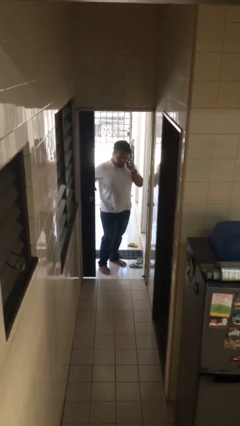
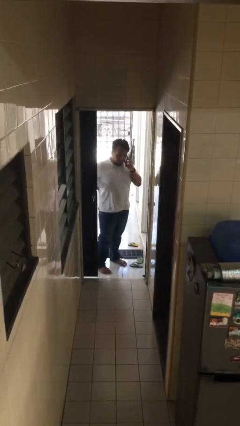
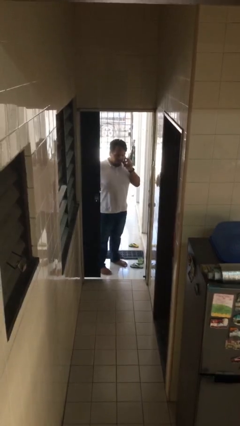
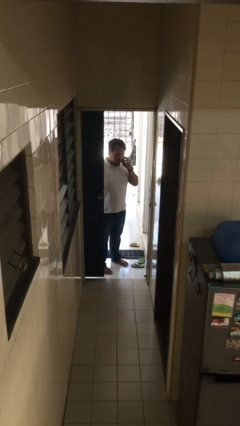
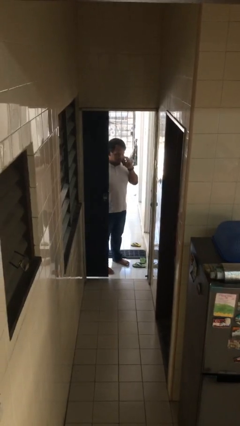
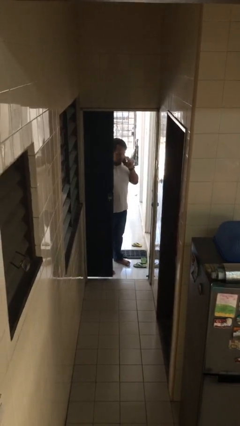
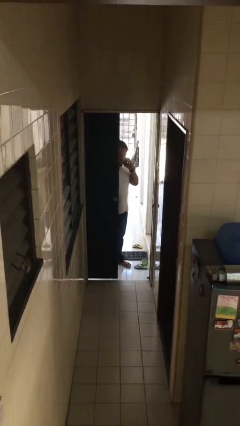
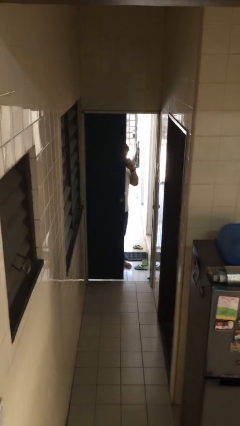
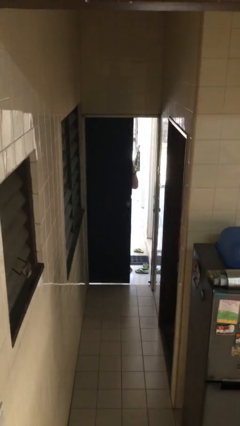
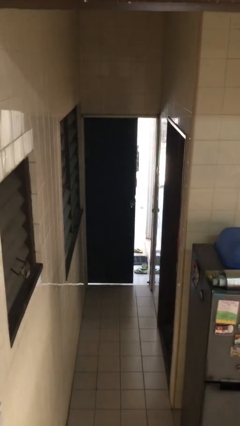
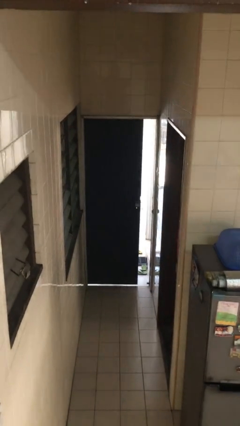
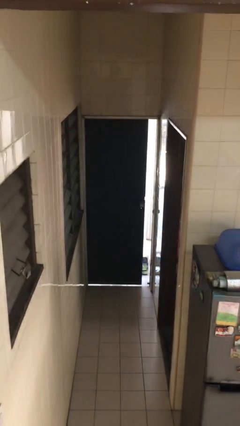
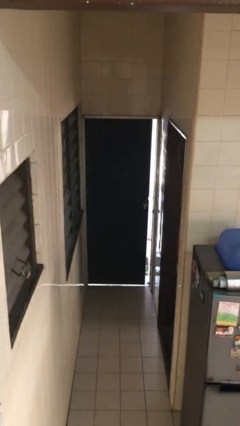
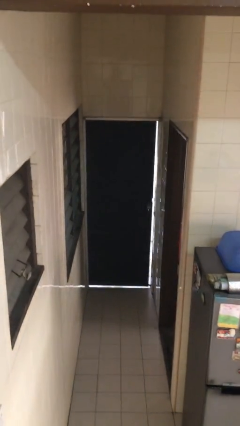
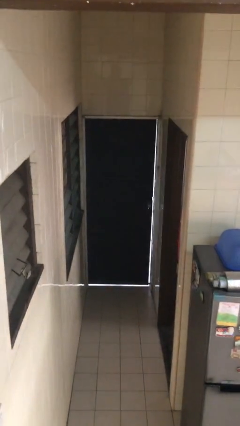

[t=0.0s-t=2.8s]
person closes facility door

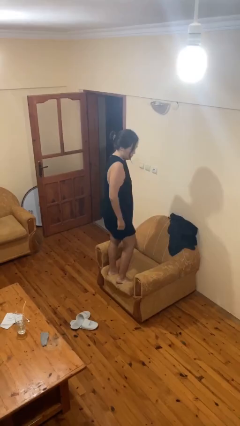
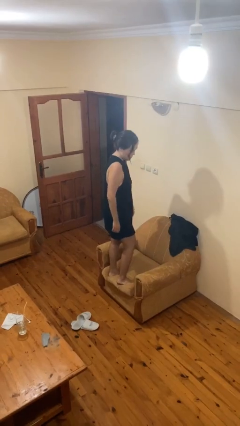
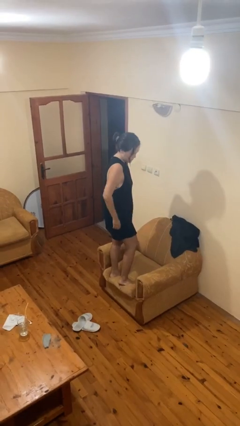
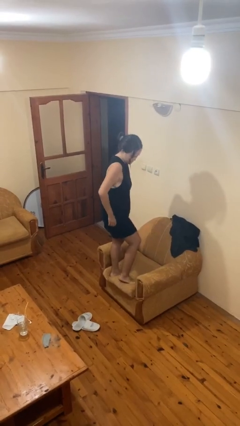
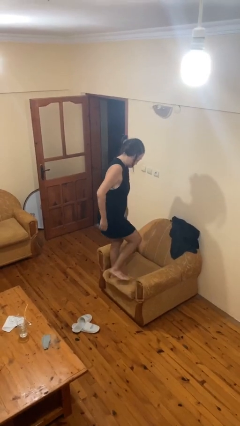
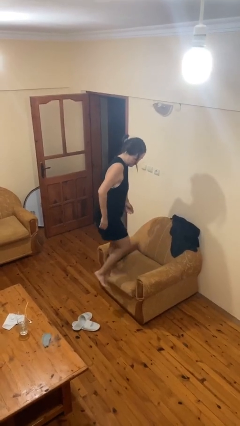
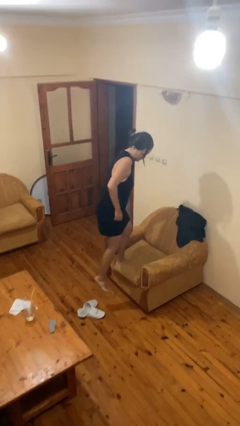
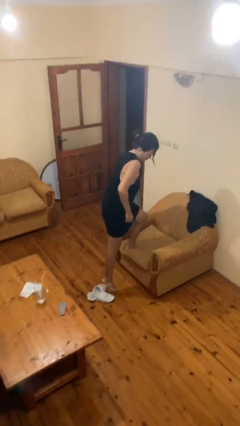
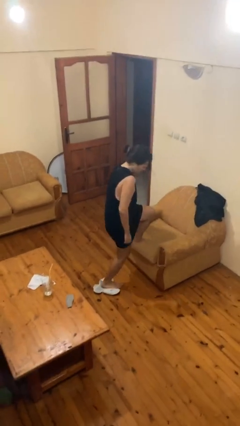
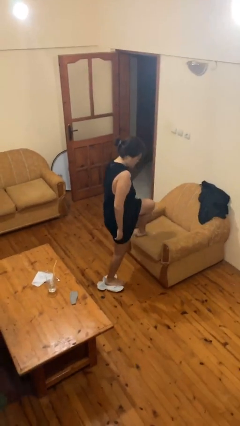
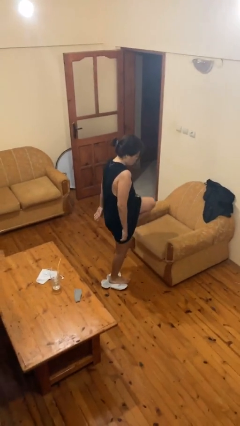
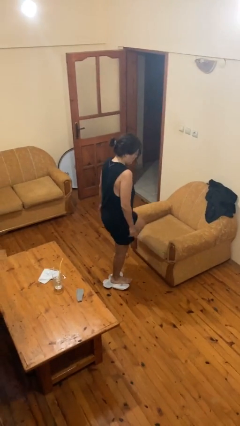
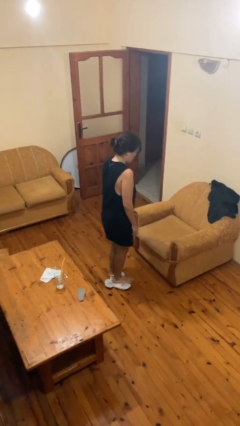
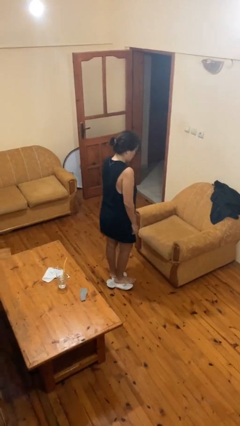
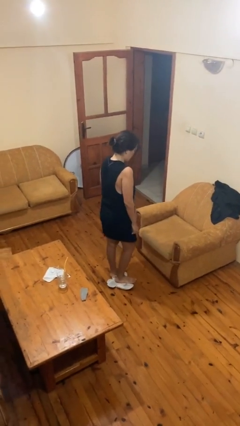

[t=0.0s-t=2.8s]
person climbs off chair

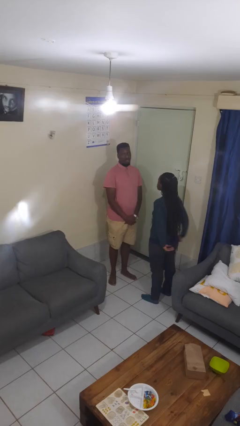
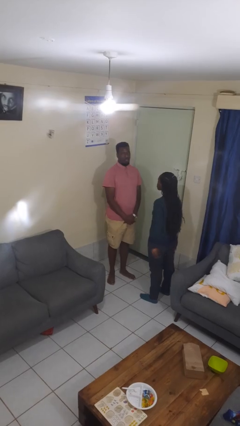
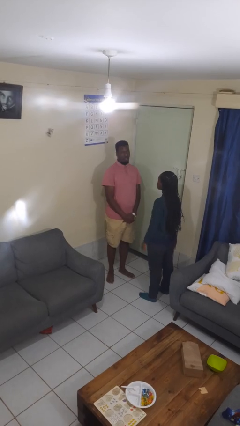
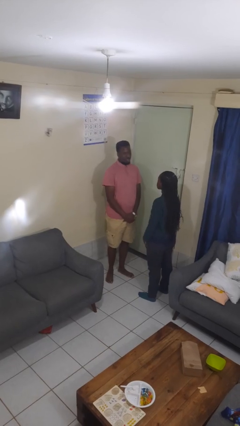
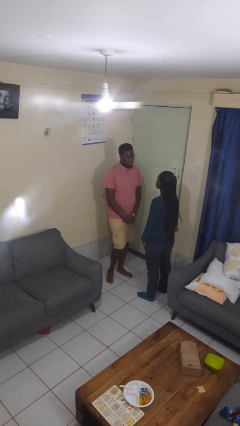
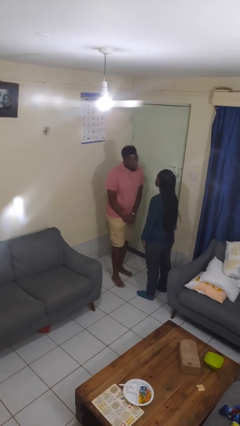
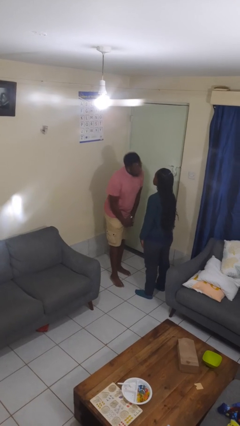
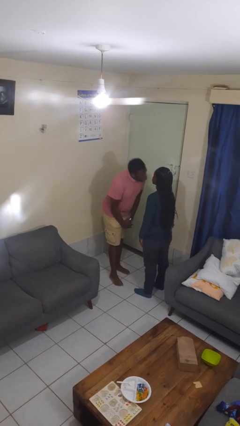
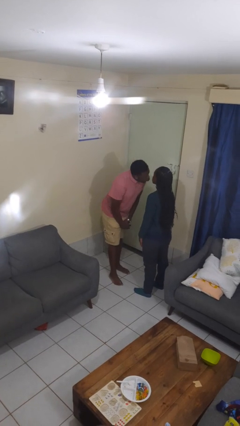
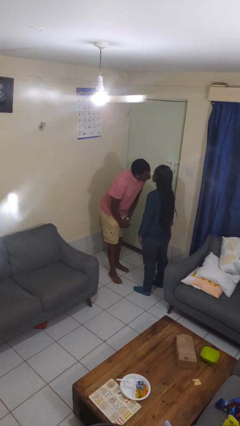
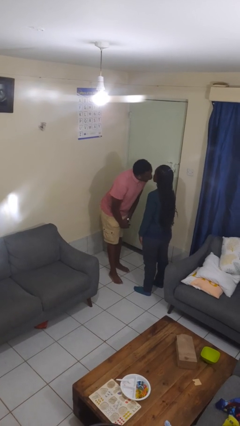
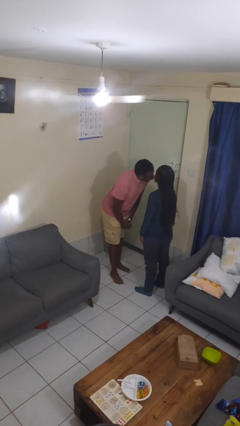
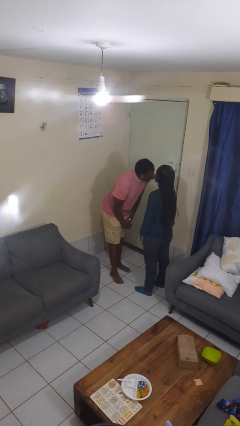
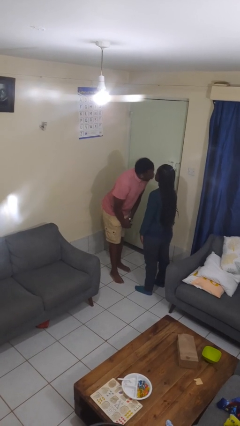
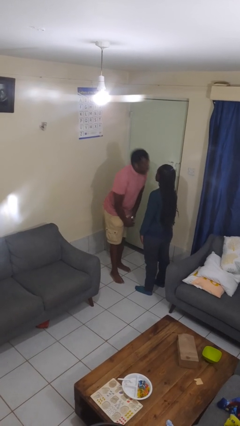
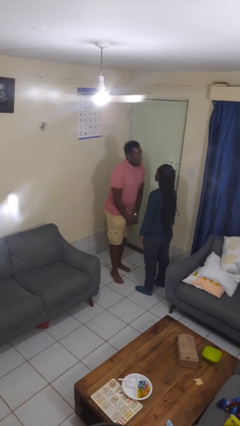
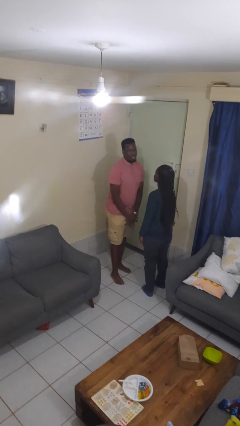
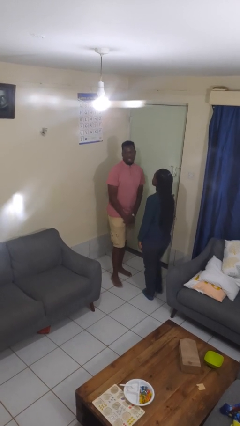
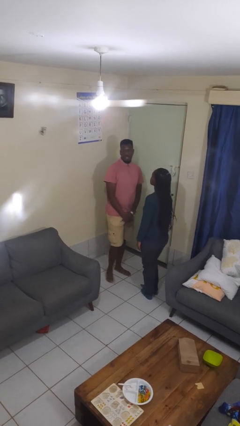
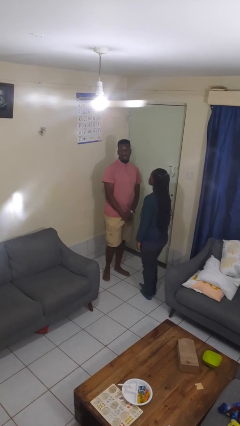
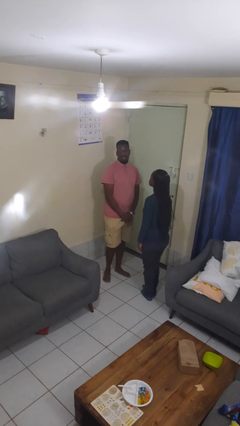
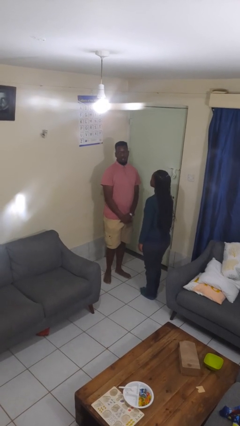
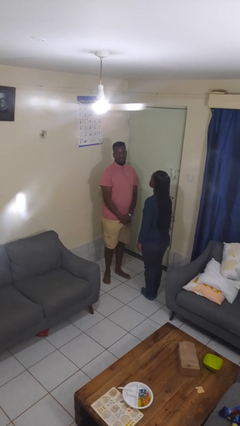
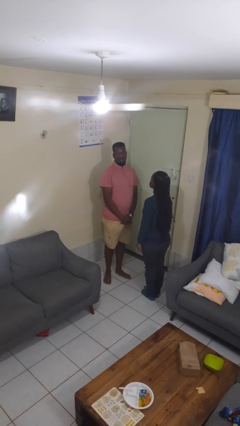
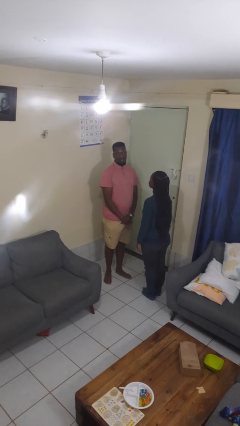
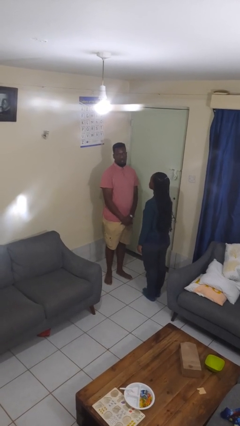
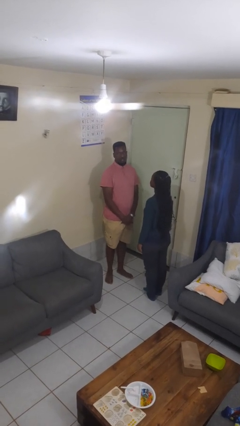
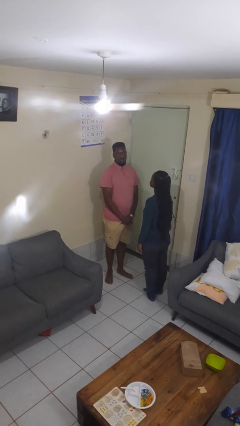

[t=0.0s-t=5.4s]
person kisses cheek of person

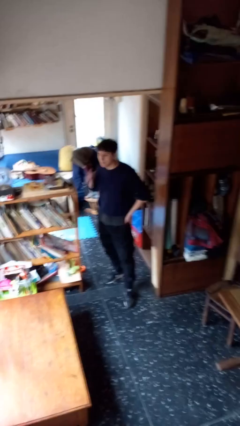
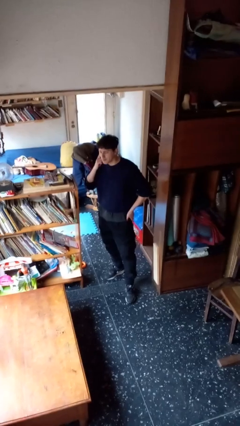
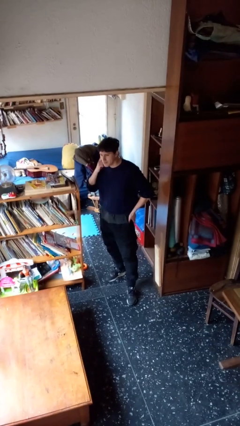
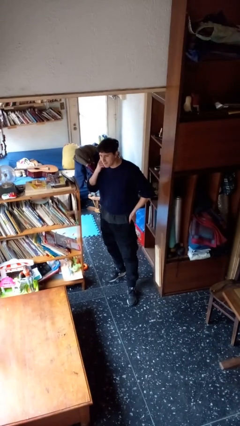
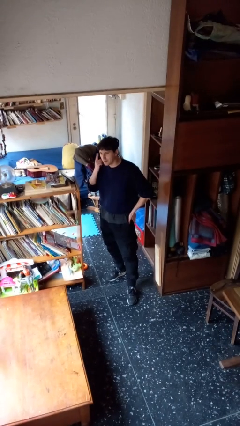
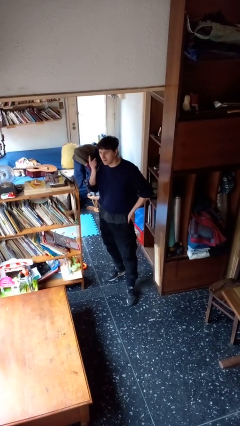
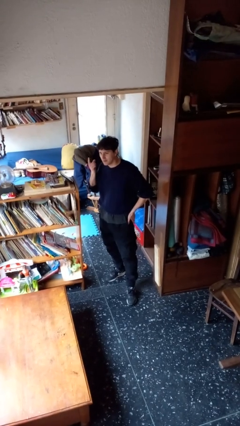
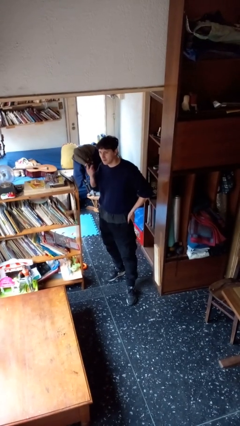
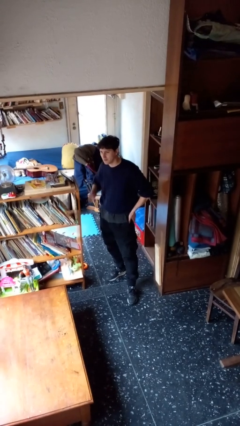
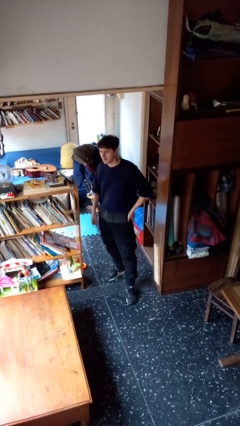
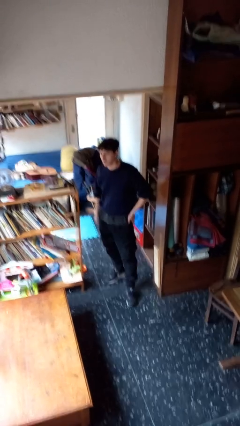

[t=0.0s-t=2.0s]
person gestures listen closely

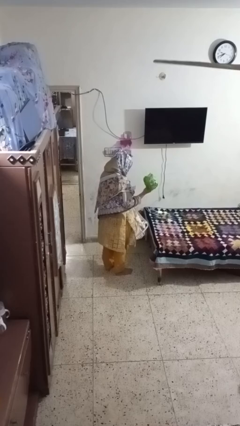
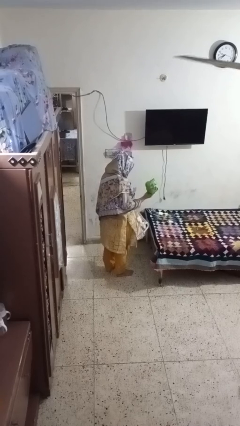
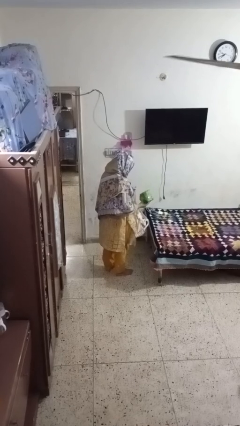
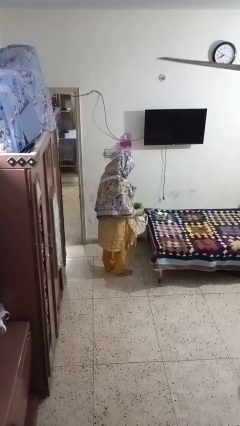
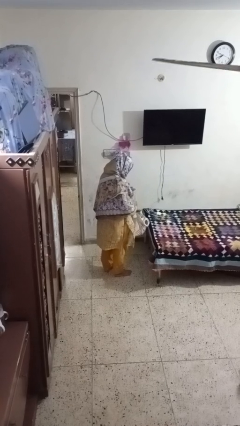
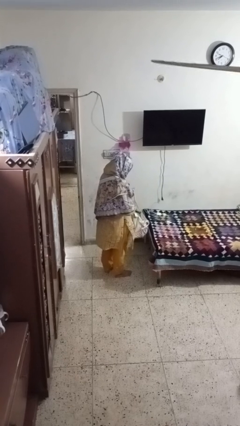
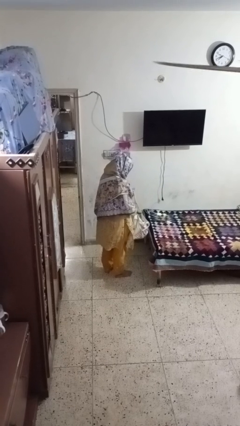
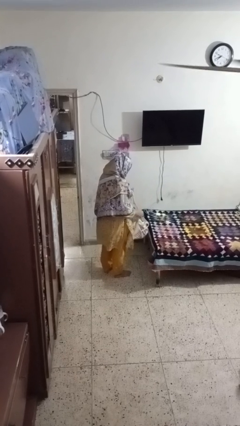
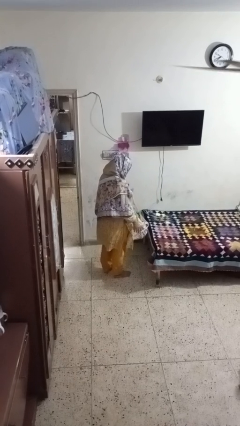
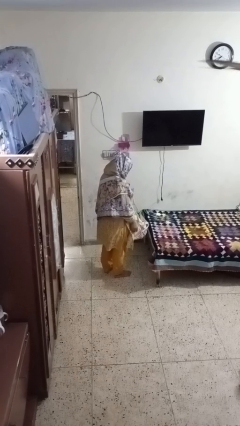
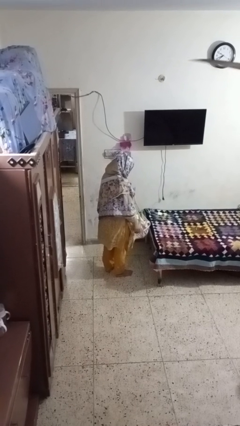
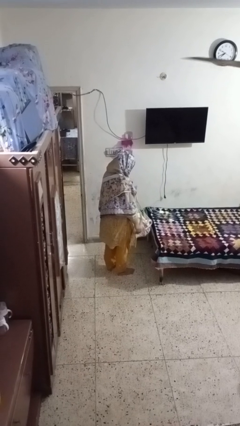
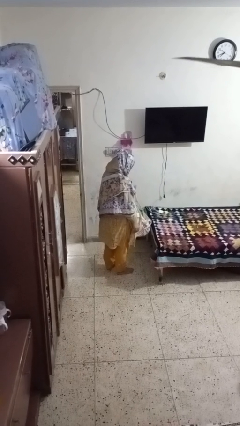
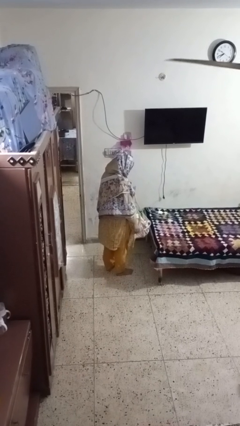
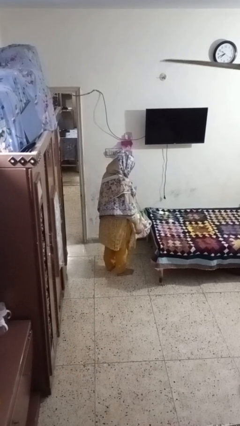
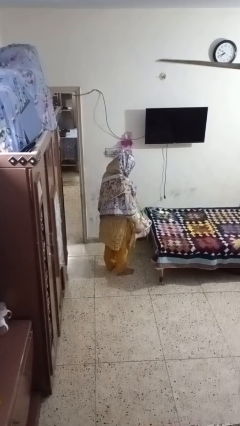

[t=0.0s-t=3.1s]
person puts object into bag

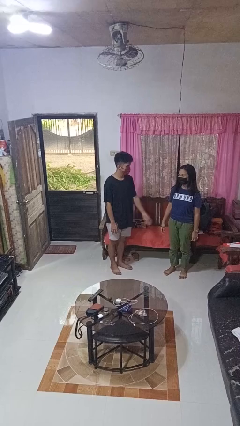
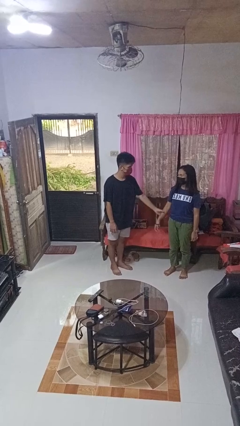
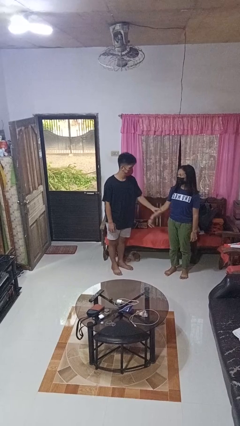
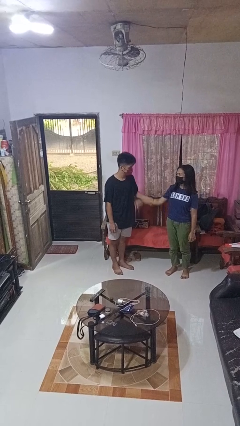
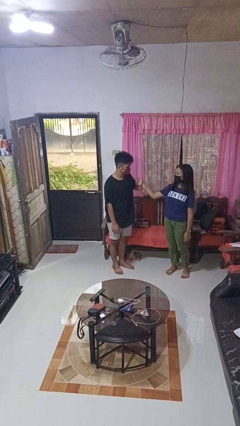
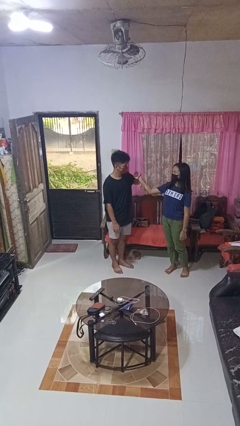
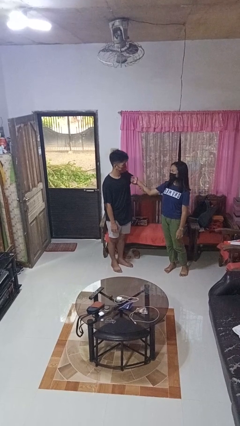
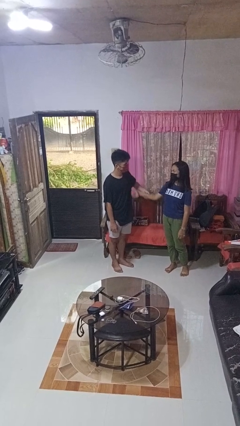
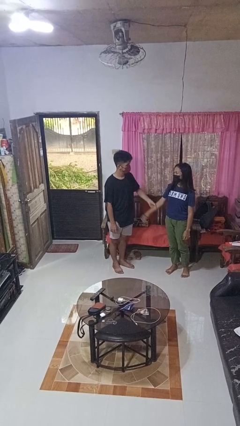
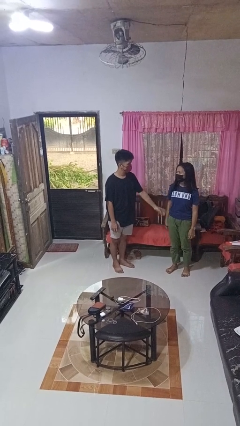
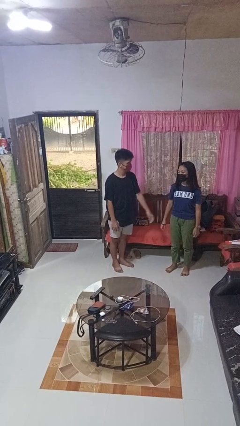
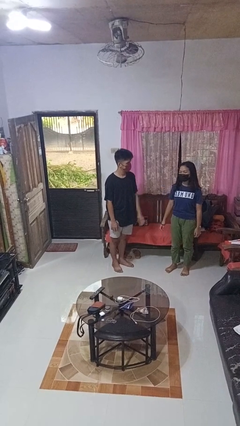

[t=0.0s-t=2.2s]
person grabs person by forearm
